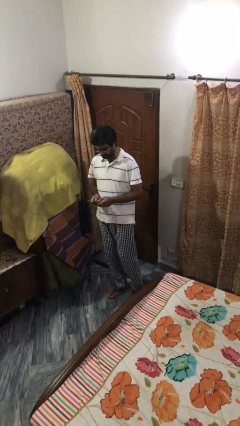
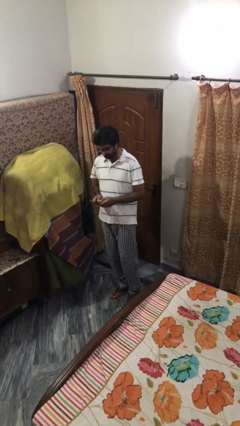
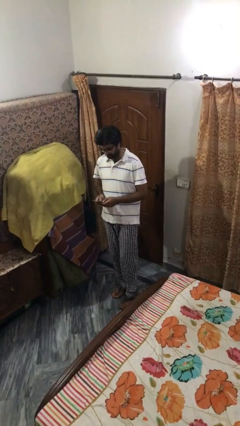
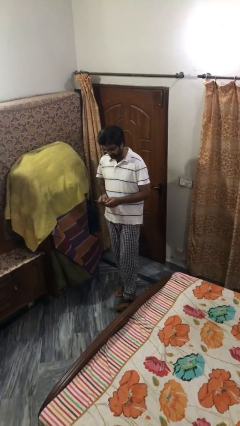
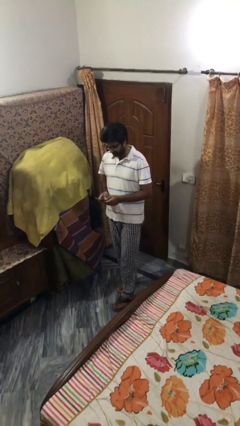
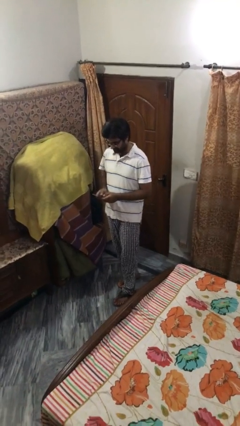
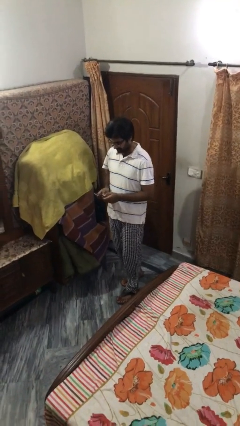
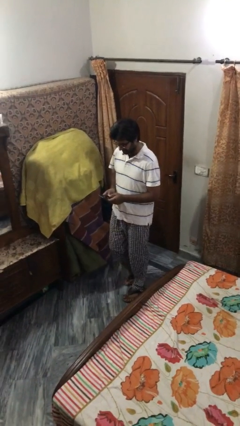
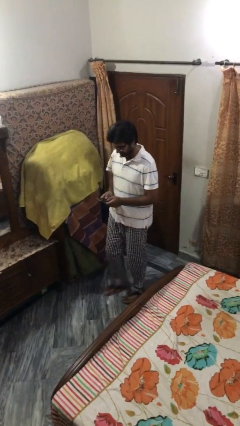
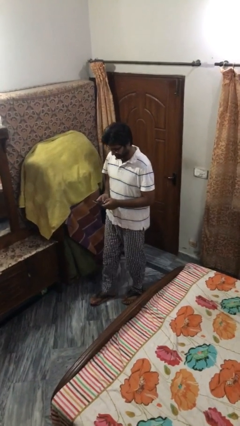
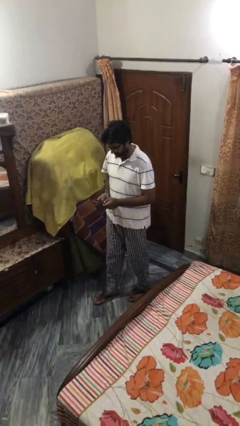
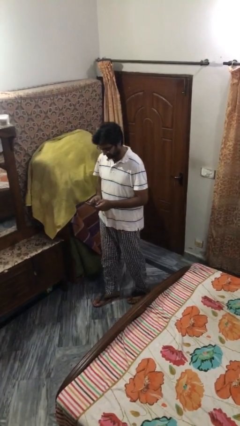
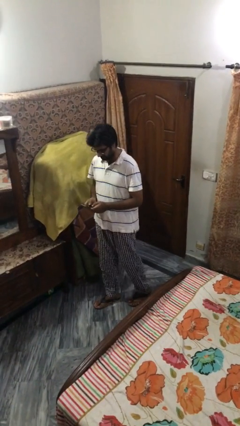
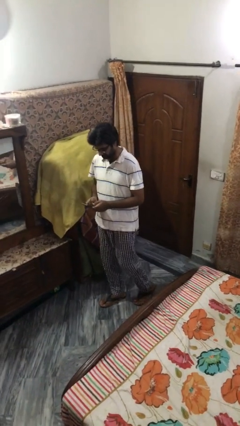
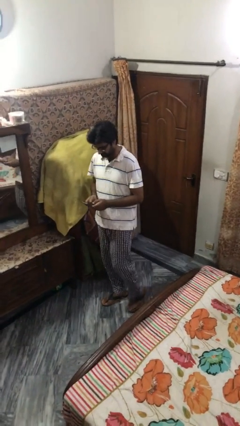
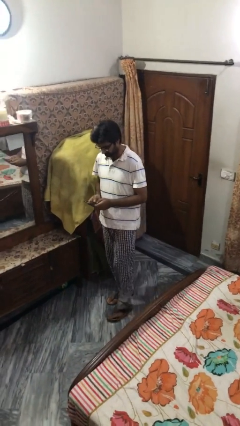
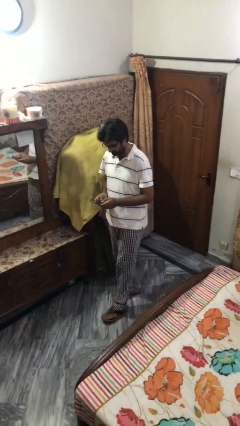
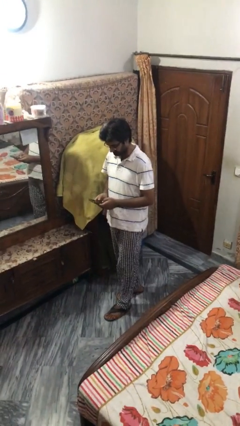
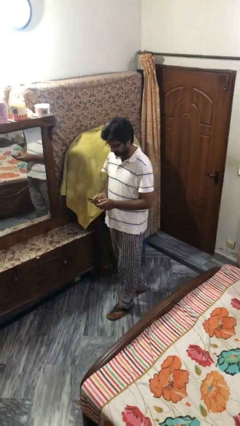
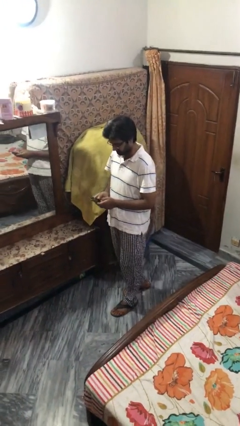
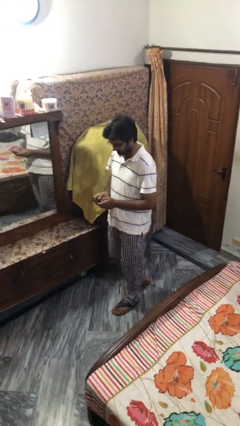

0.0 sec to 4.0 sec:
person texts on phone

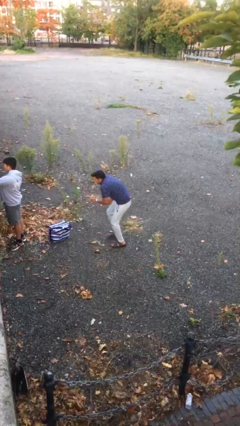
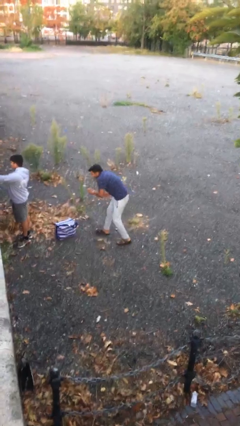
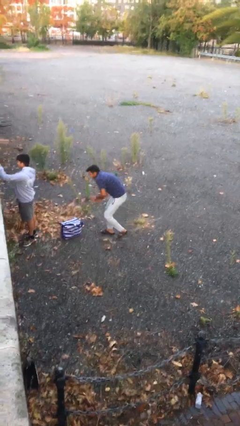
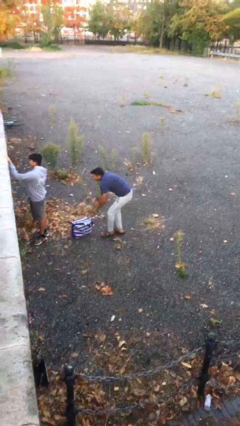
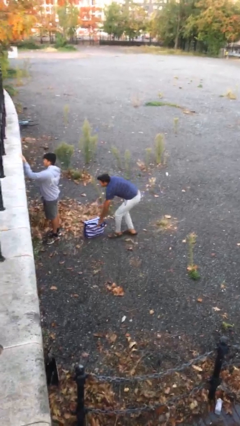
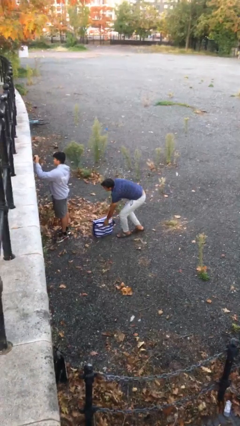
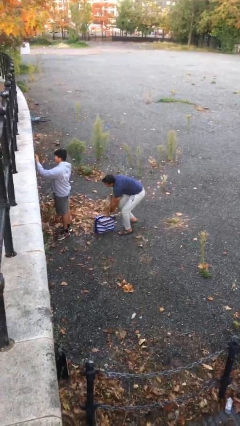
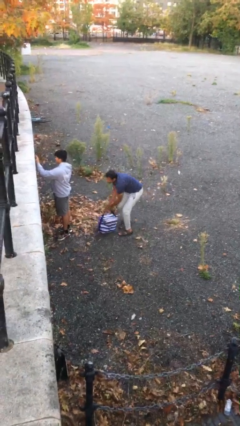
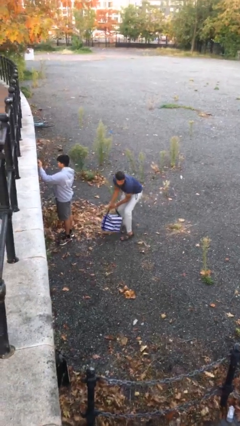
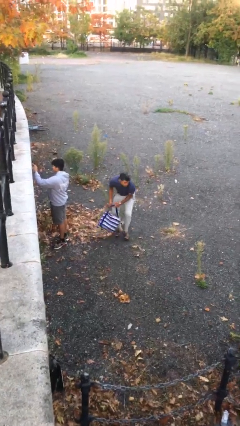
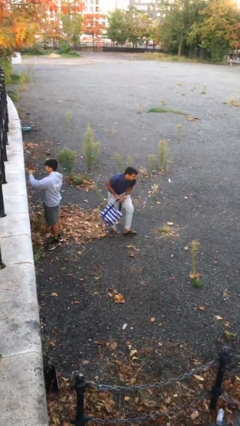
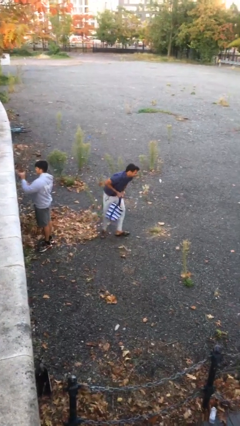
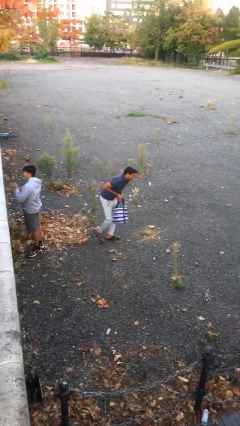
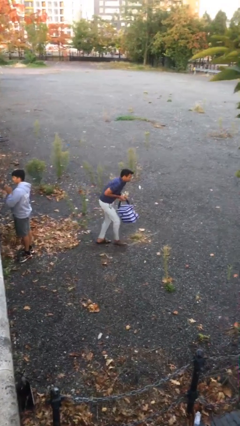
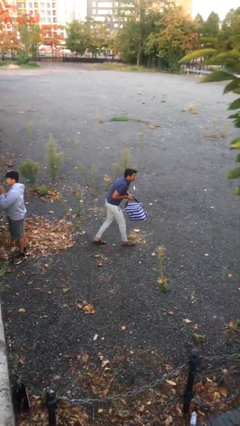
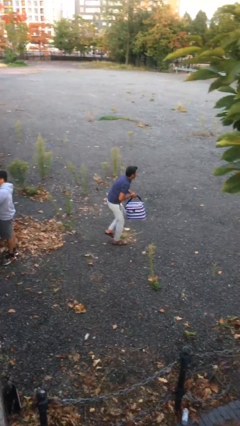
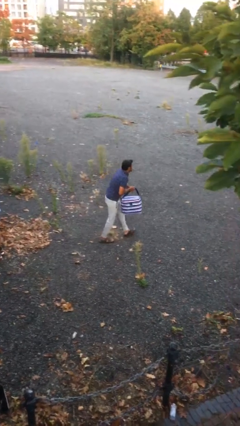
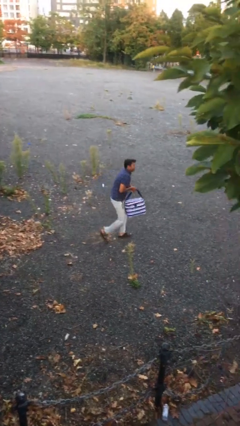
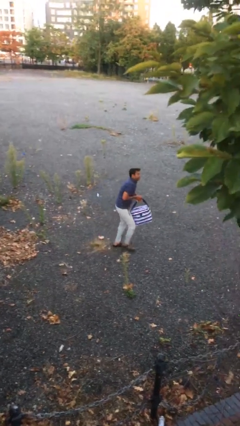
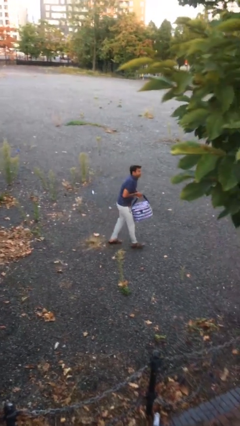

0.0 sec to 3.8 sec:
person steals object from person

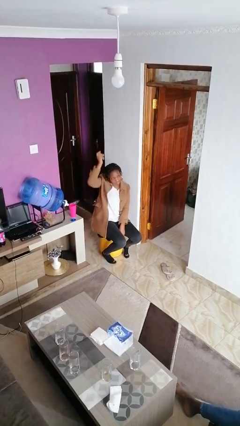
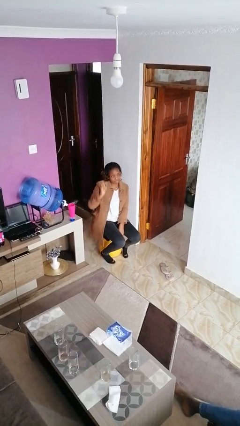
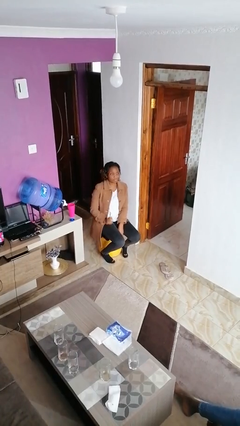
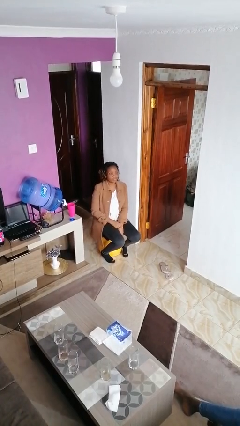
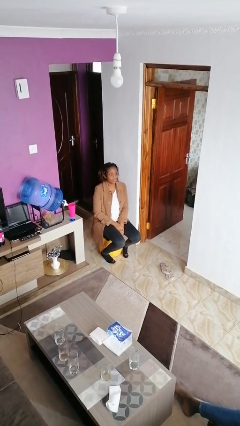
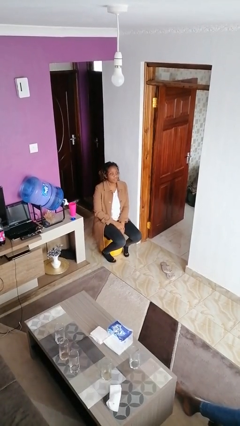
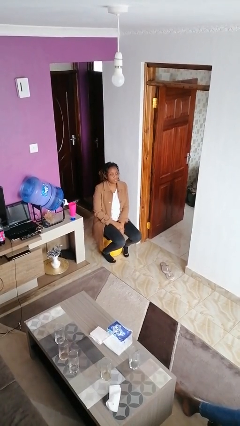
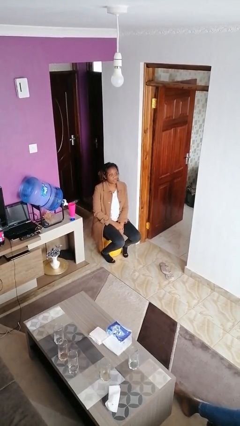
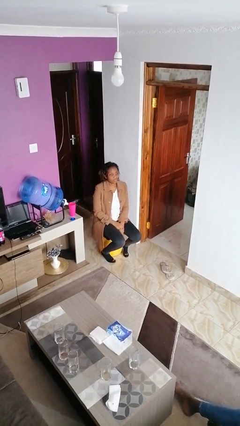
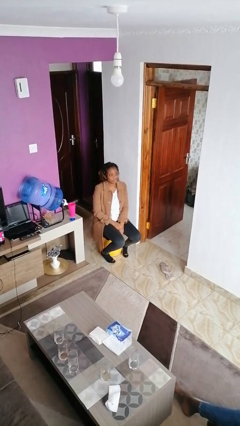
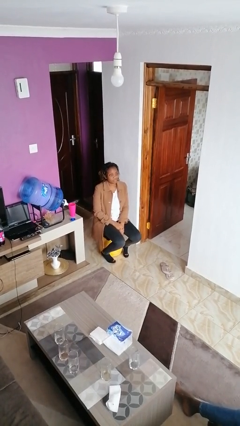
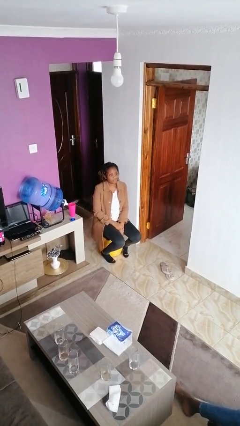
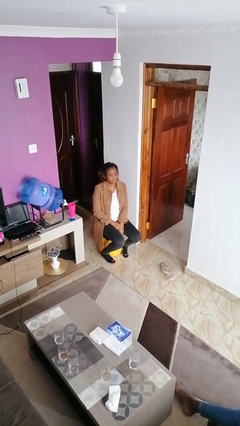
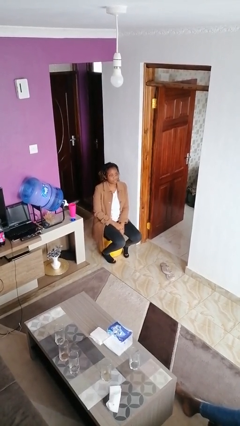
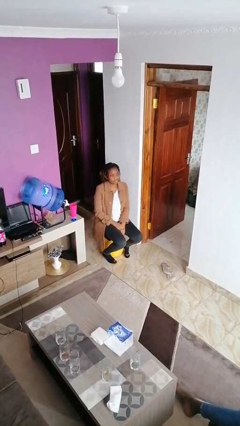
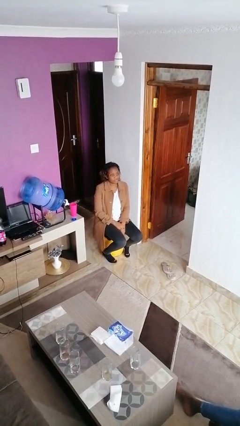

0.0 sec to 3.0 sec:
person gestures lower hand

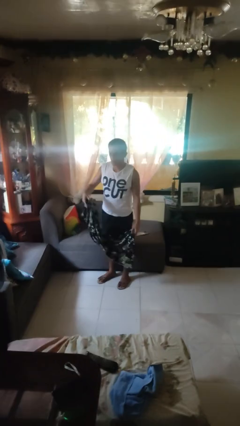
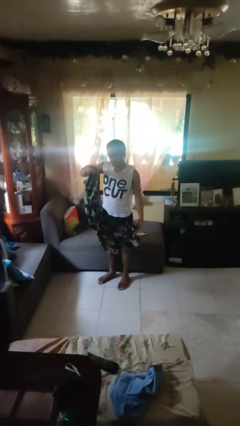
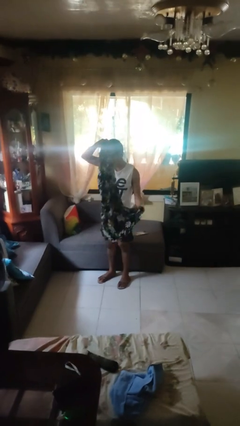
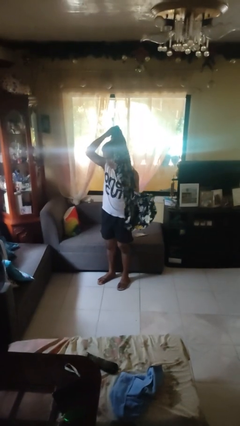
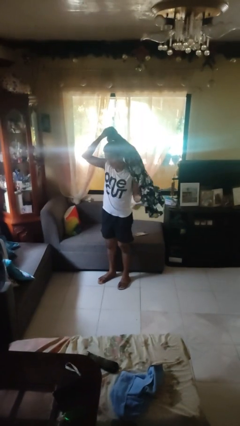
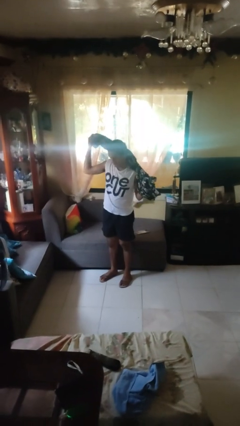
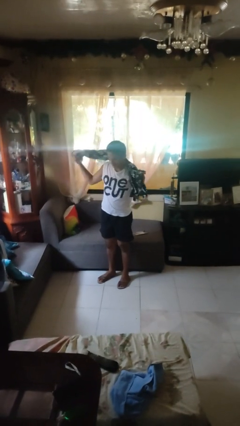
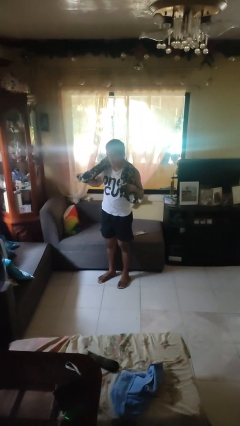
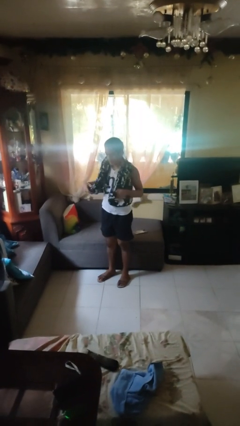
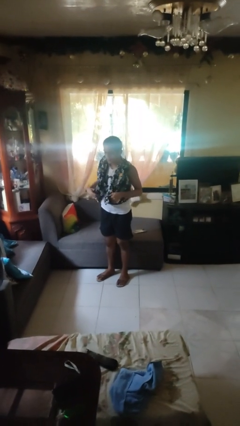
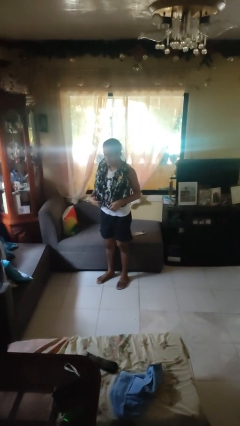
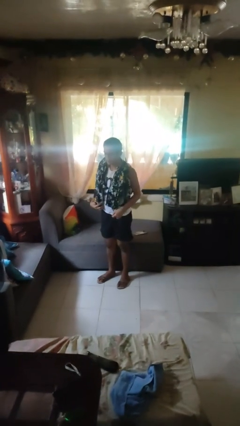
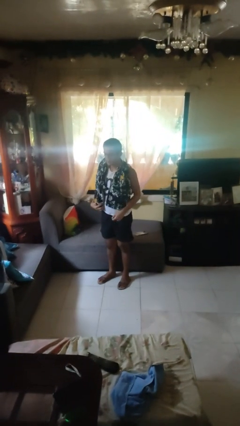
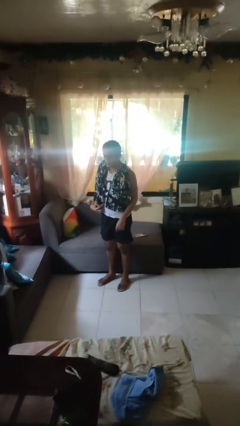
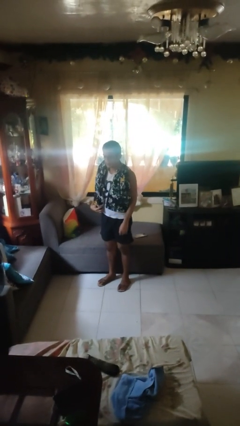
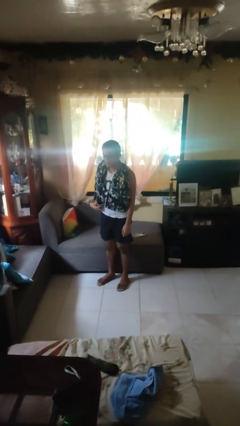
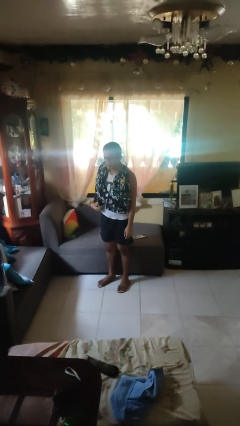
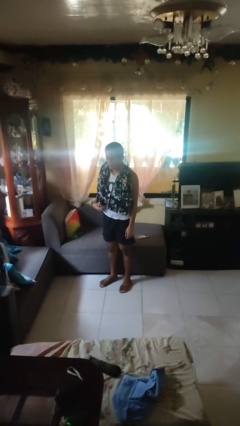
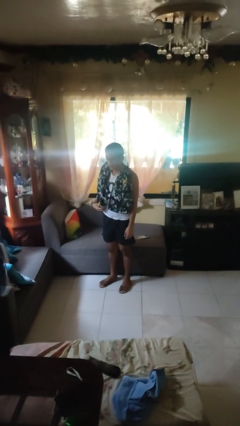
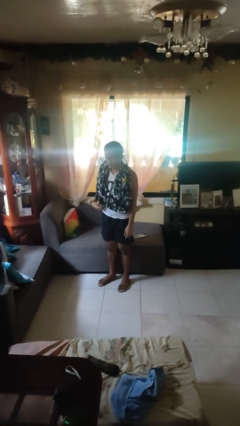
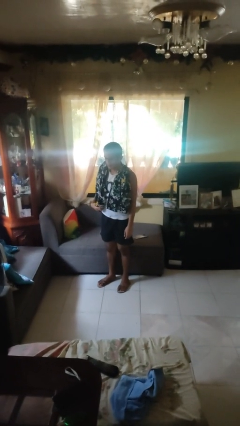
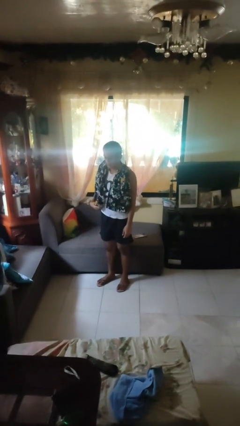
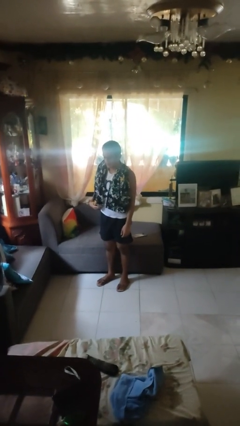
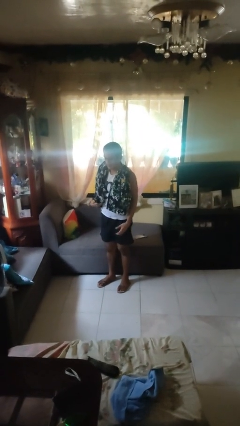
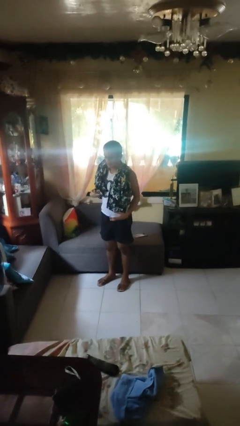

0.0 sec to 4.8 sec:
person puts on scarf

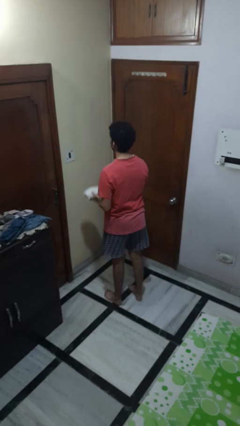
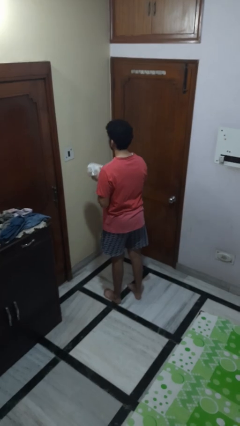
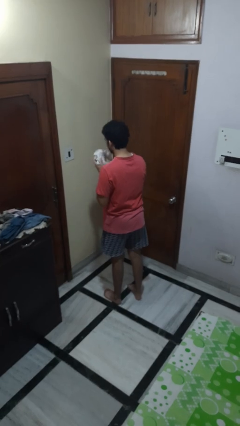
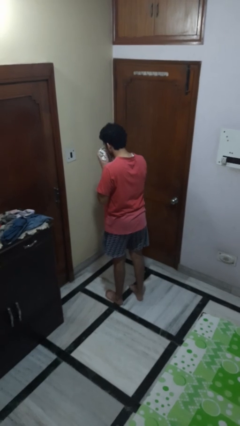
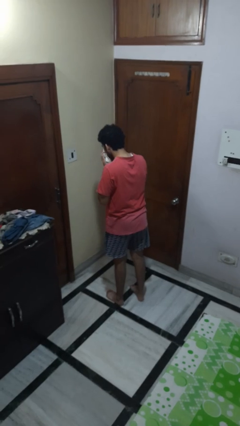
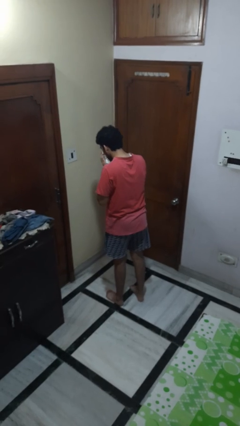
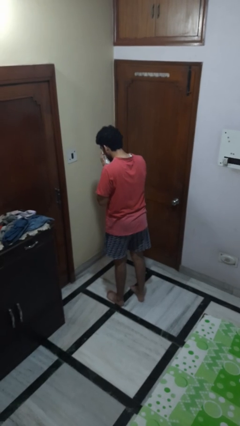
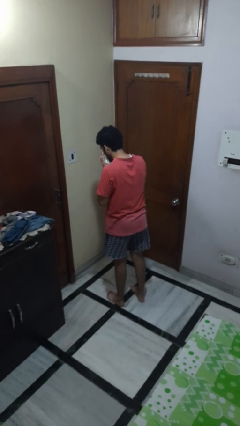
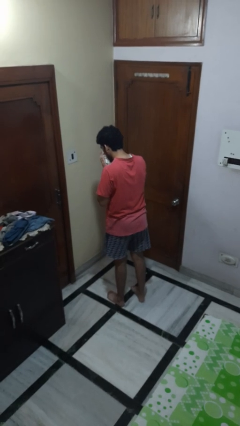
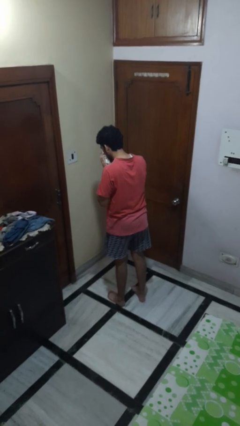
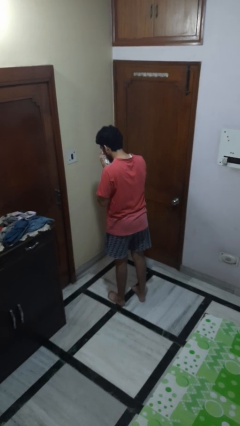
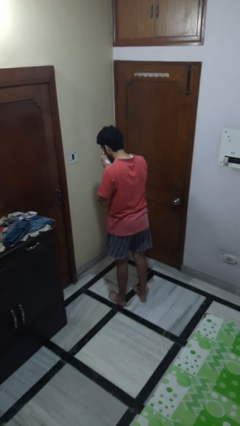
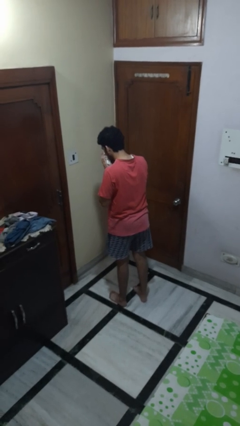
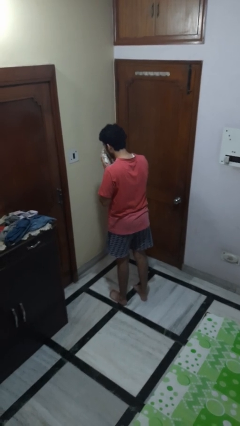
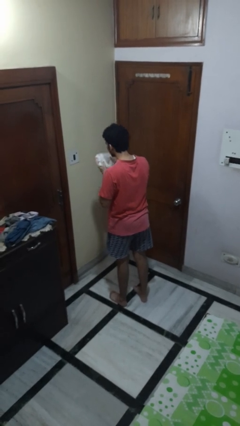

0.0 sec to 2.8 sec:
person blows nose
